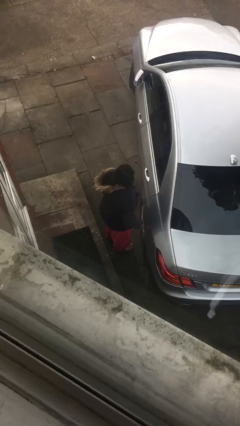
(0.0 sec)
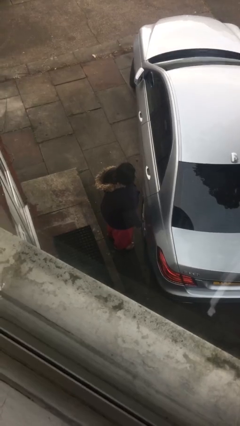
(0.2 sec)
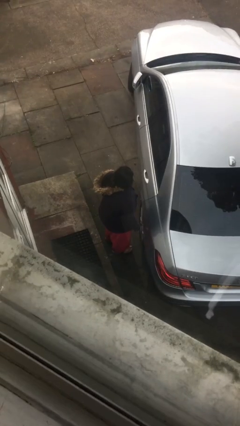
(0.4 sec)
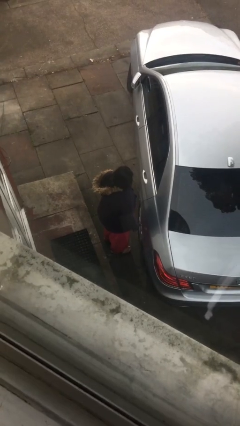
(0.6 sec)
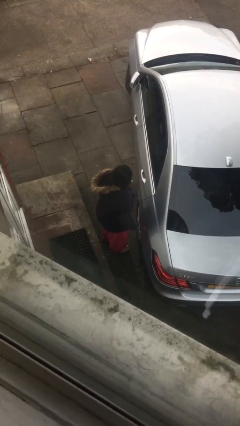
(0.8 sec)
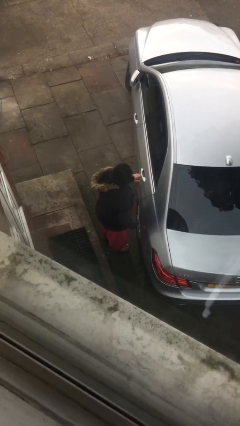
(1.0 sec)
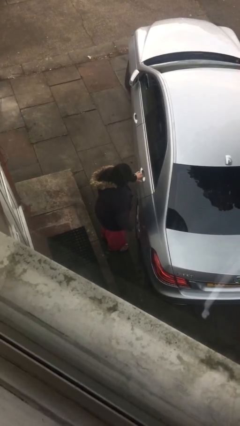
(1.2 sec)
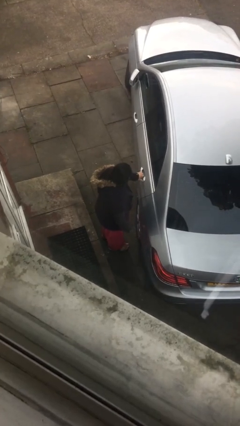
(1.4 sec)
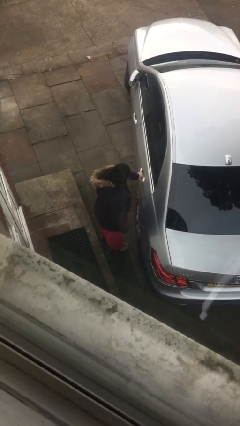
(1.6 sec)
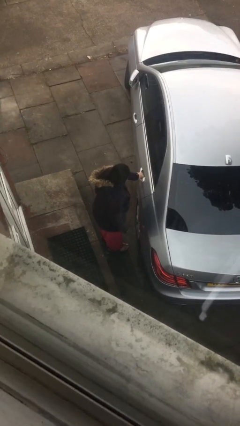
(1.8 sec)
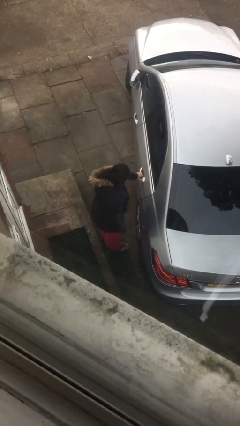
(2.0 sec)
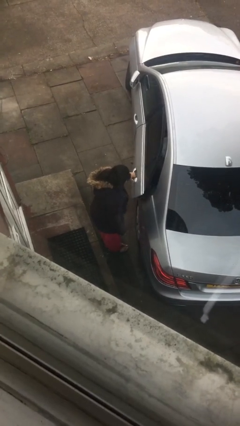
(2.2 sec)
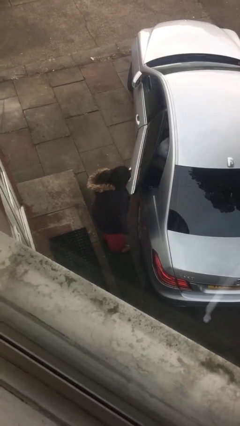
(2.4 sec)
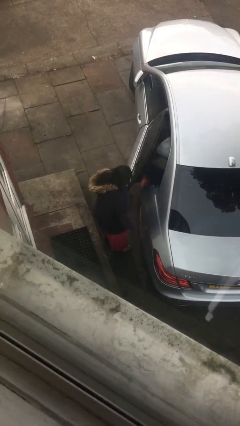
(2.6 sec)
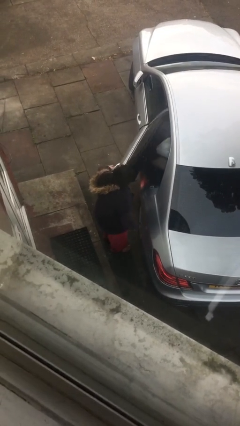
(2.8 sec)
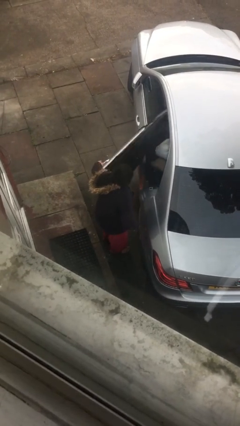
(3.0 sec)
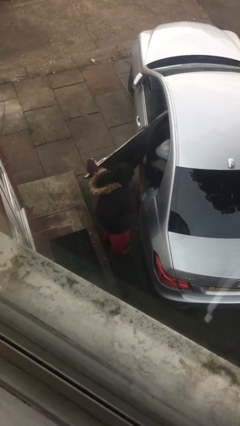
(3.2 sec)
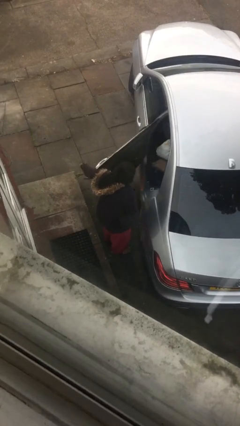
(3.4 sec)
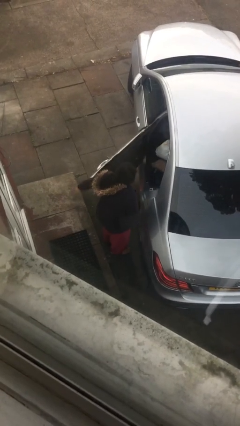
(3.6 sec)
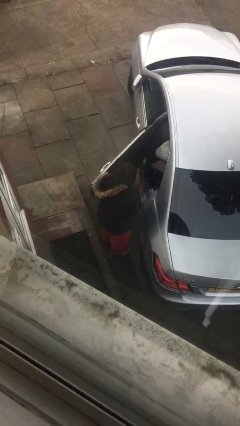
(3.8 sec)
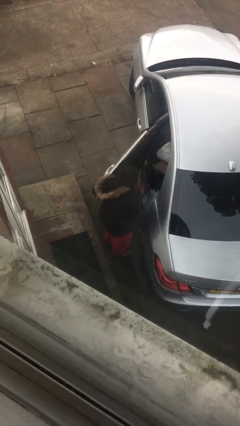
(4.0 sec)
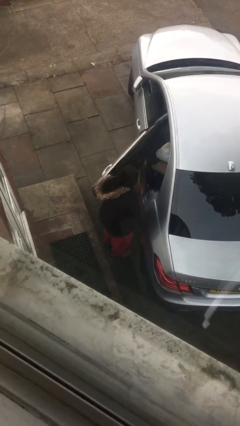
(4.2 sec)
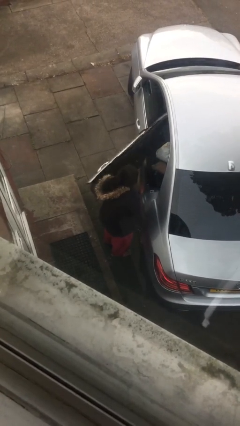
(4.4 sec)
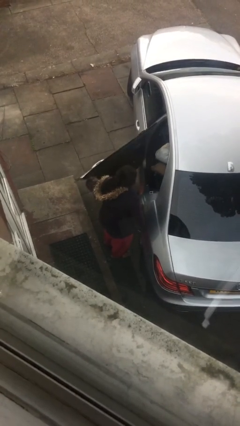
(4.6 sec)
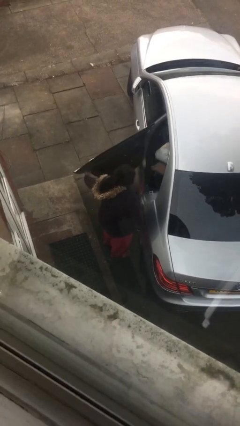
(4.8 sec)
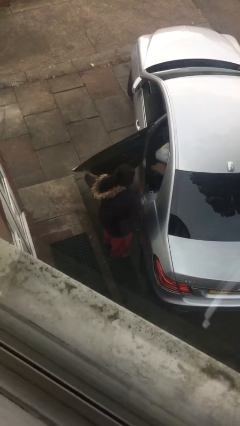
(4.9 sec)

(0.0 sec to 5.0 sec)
person opens car door

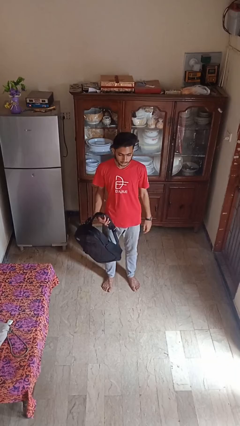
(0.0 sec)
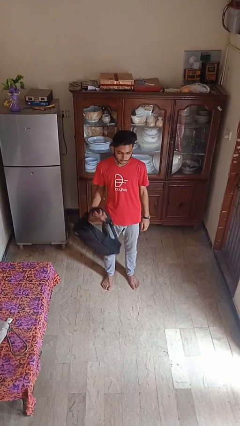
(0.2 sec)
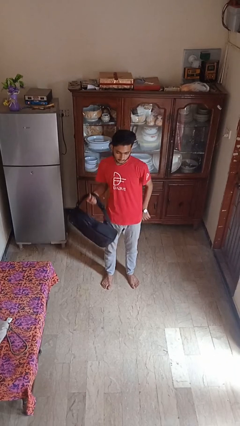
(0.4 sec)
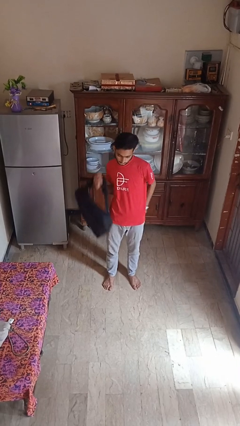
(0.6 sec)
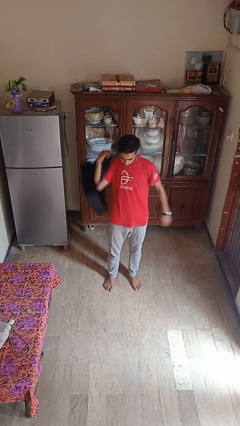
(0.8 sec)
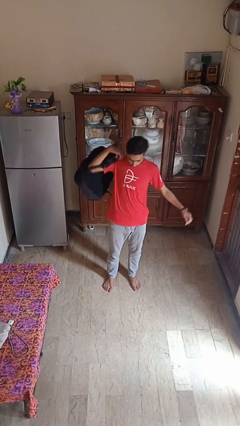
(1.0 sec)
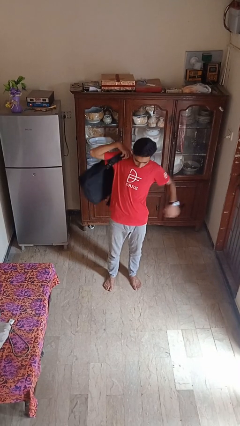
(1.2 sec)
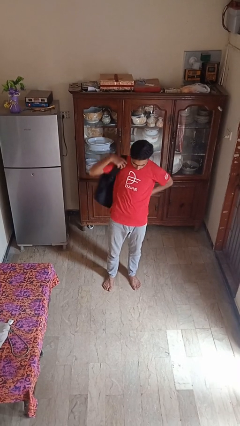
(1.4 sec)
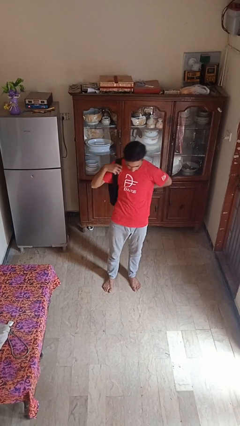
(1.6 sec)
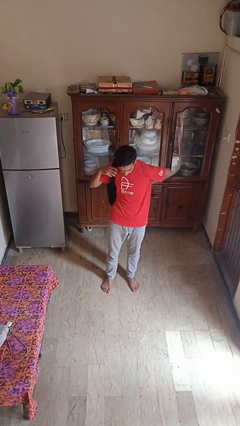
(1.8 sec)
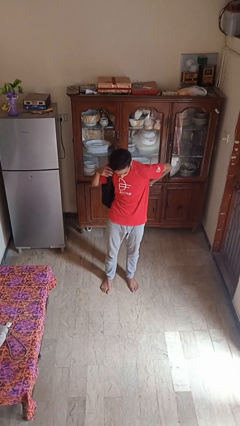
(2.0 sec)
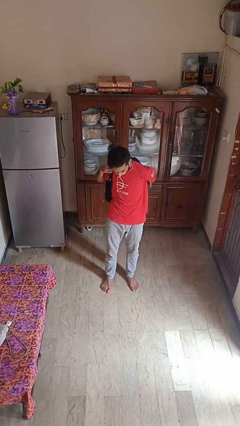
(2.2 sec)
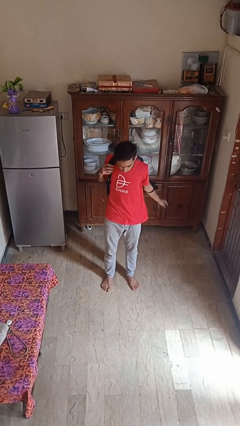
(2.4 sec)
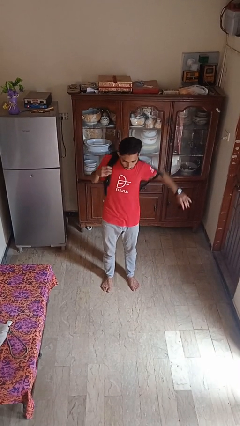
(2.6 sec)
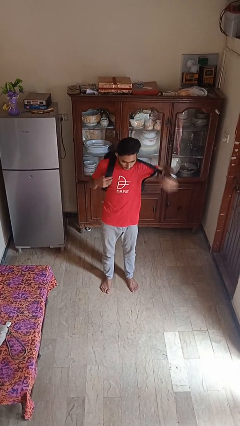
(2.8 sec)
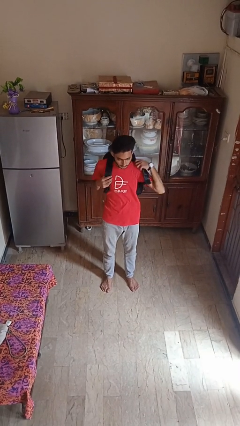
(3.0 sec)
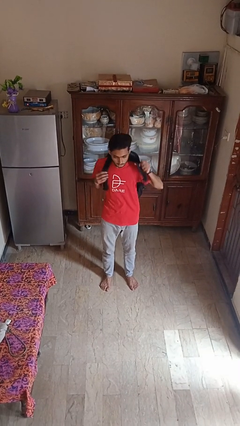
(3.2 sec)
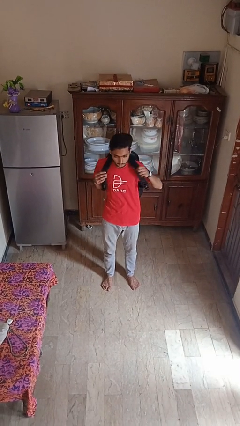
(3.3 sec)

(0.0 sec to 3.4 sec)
person puts on backpack

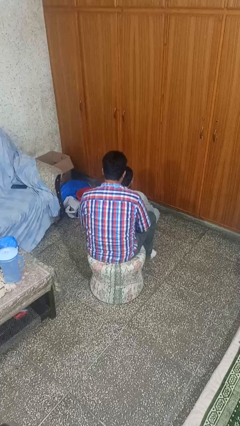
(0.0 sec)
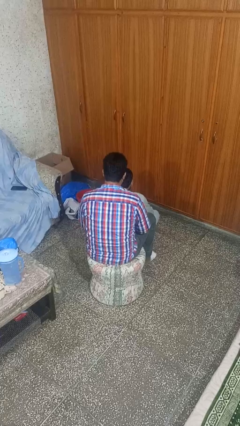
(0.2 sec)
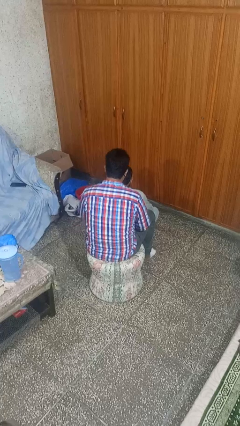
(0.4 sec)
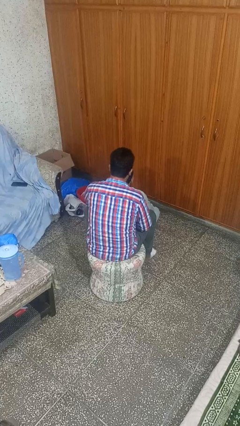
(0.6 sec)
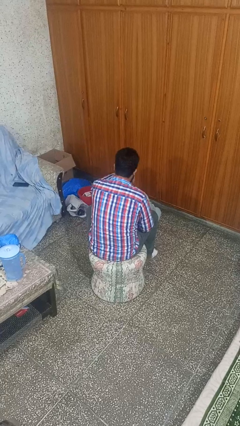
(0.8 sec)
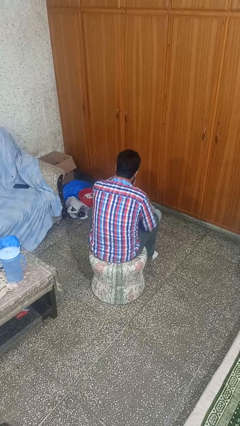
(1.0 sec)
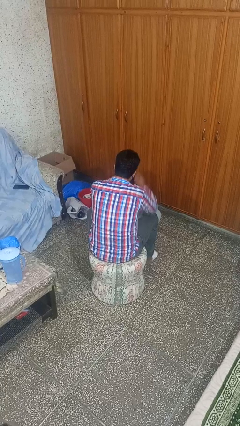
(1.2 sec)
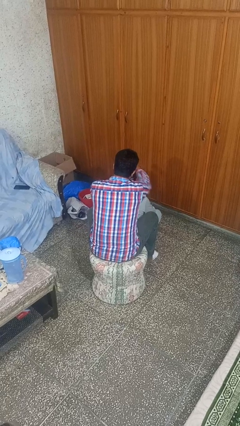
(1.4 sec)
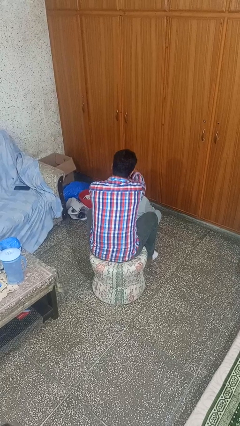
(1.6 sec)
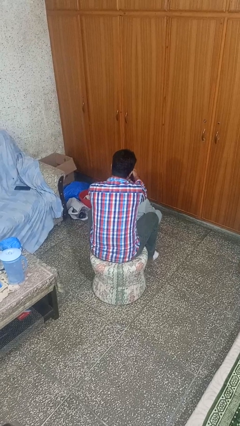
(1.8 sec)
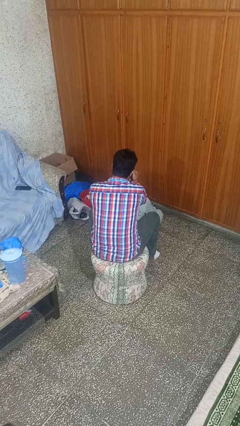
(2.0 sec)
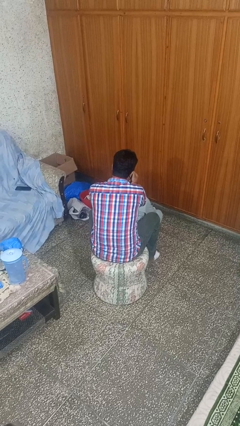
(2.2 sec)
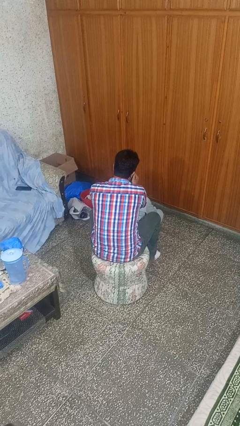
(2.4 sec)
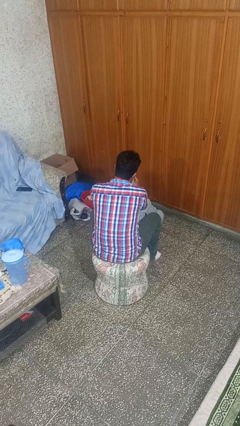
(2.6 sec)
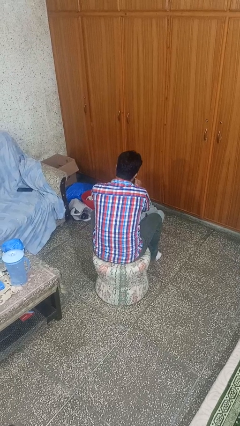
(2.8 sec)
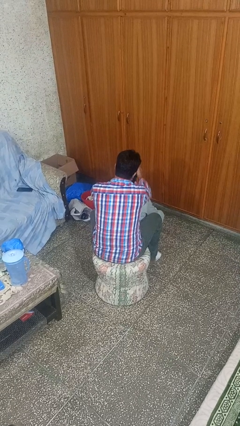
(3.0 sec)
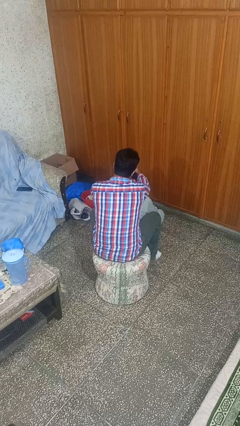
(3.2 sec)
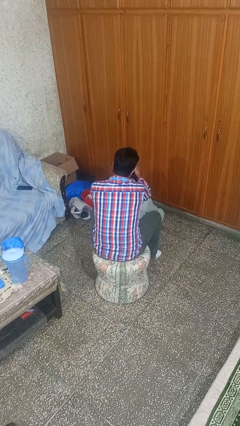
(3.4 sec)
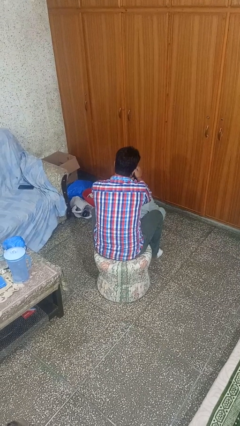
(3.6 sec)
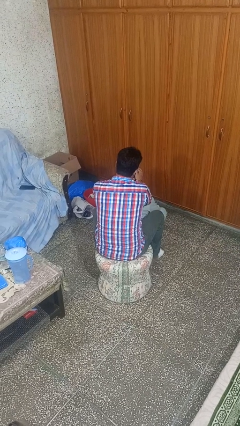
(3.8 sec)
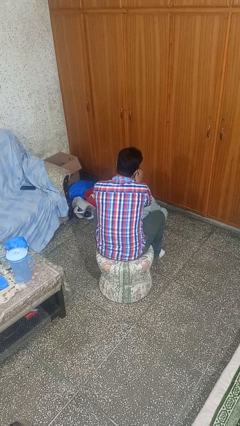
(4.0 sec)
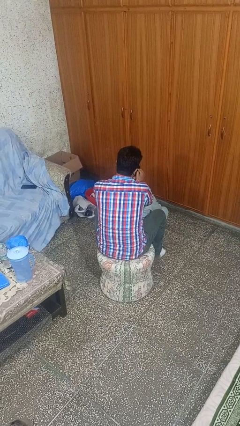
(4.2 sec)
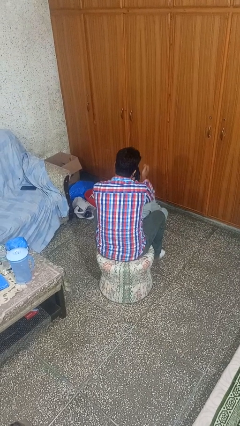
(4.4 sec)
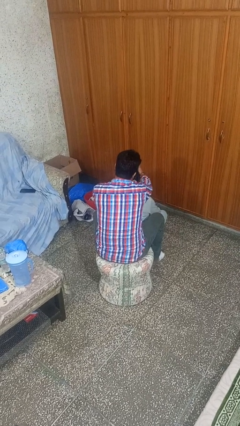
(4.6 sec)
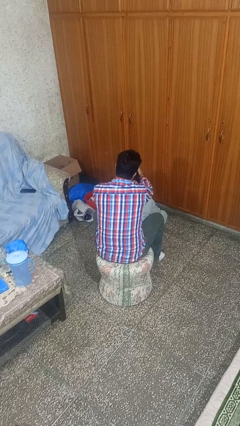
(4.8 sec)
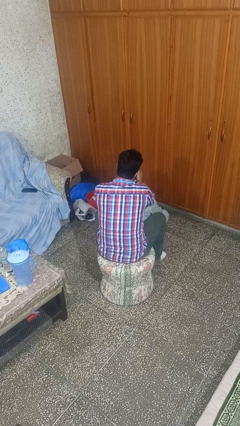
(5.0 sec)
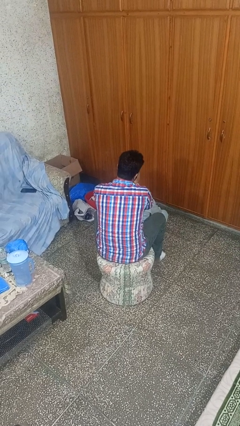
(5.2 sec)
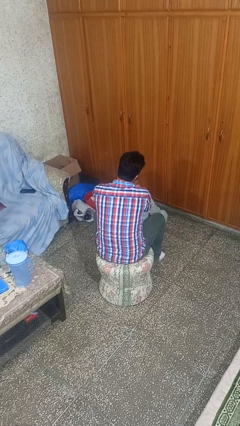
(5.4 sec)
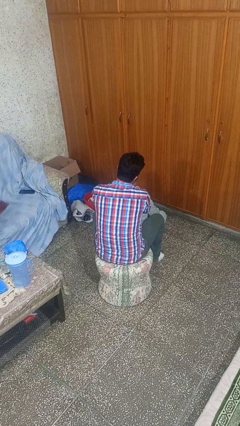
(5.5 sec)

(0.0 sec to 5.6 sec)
person braids hair of person

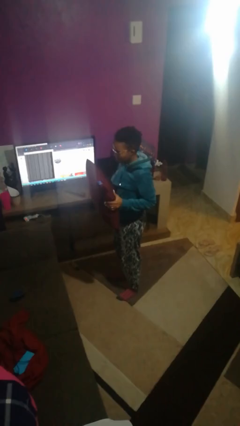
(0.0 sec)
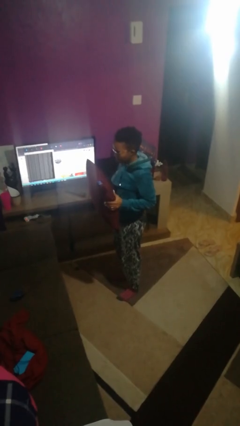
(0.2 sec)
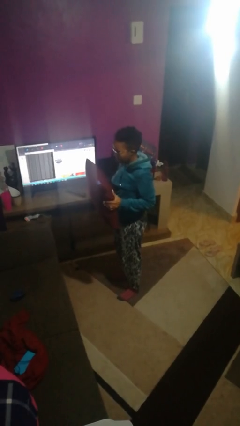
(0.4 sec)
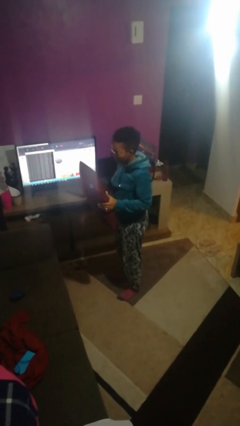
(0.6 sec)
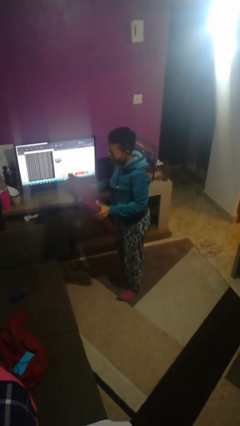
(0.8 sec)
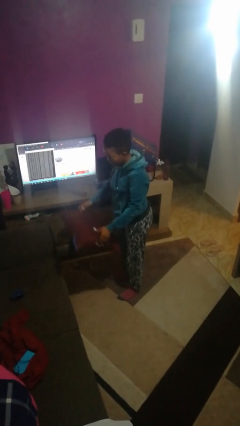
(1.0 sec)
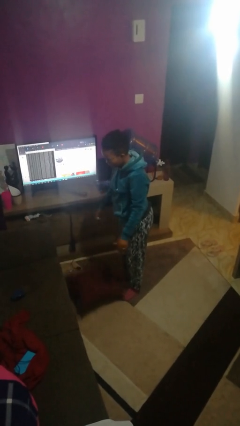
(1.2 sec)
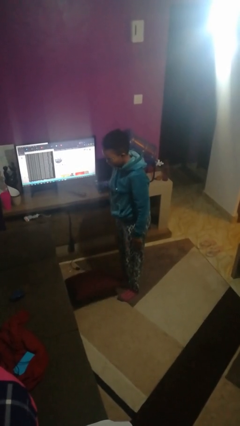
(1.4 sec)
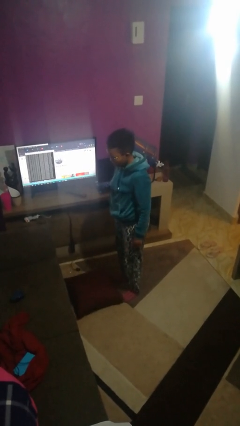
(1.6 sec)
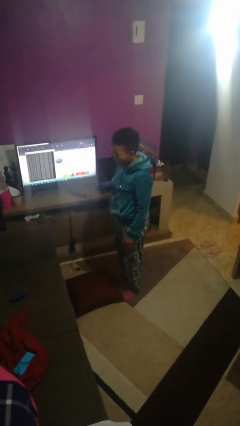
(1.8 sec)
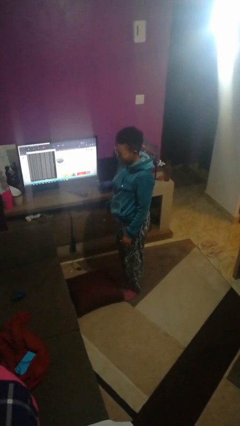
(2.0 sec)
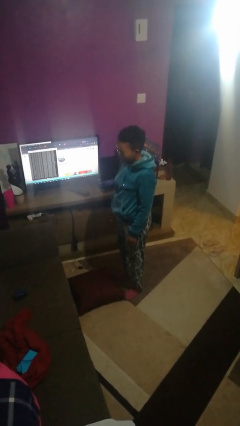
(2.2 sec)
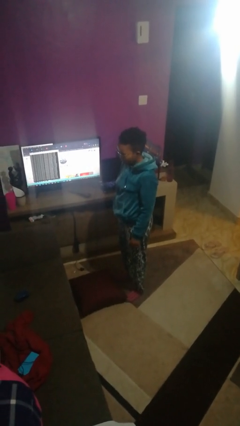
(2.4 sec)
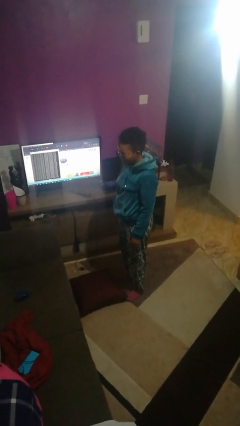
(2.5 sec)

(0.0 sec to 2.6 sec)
person throws object to ground

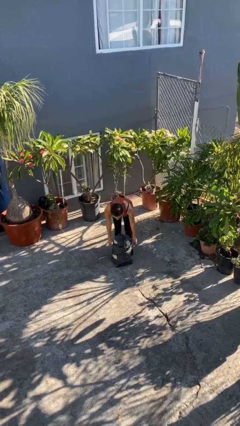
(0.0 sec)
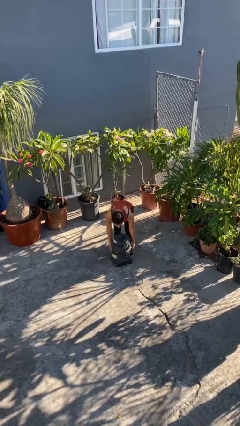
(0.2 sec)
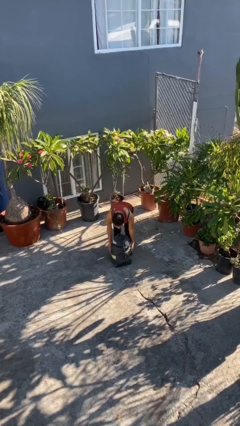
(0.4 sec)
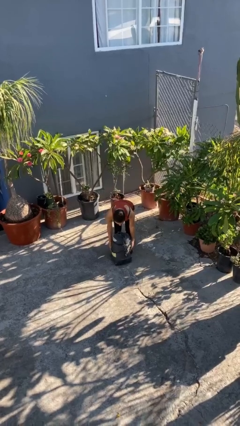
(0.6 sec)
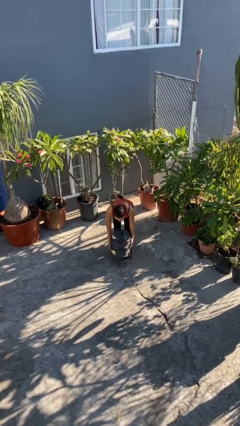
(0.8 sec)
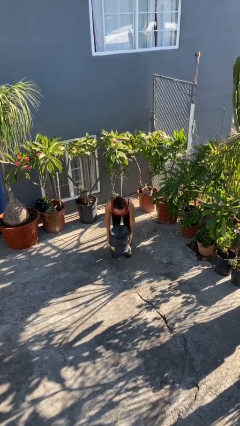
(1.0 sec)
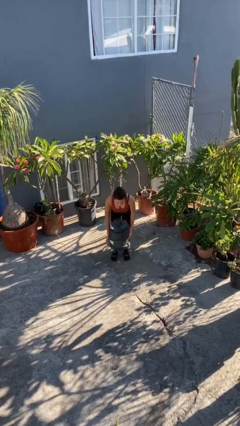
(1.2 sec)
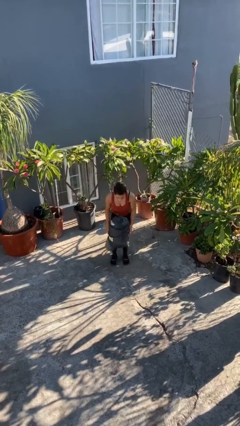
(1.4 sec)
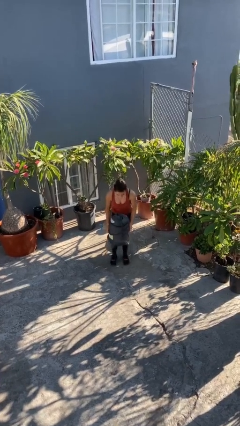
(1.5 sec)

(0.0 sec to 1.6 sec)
person picks up object from floor
